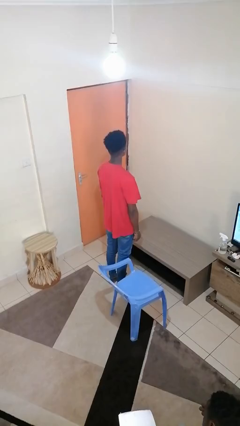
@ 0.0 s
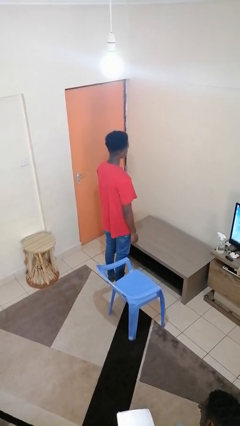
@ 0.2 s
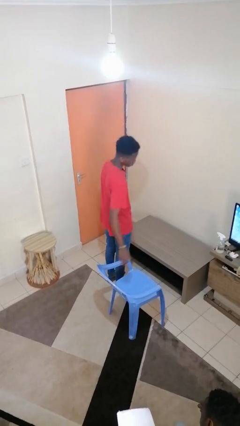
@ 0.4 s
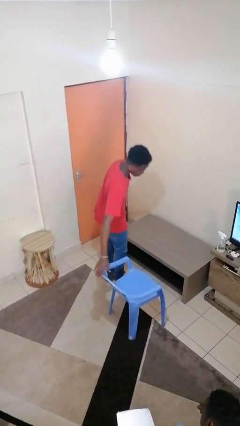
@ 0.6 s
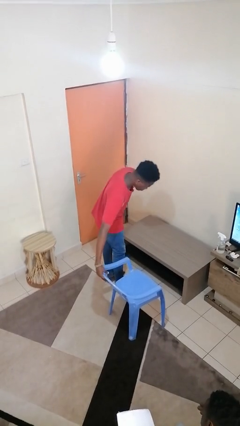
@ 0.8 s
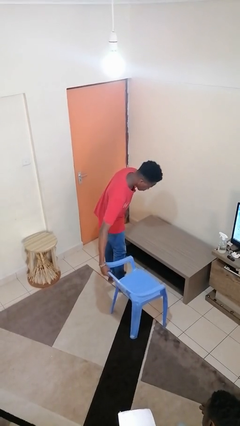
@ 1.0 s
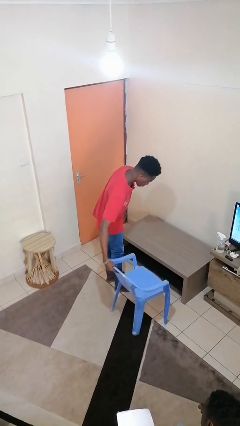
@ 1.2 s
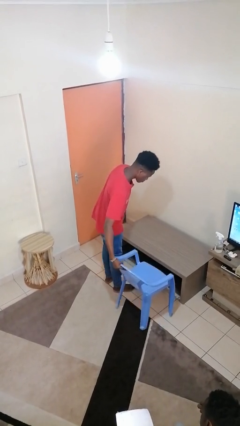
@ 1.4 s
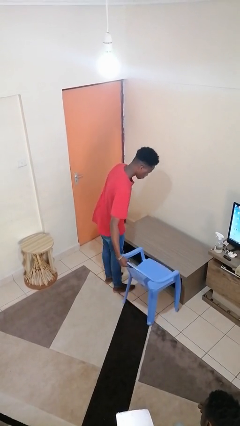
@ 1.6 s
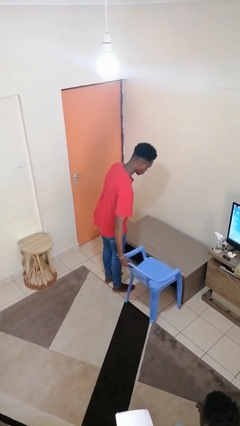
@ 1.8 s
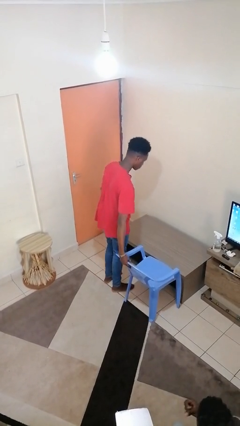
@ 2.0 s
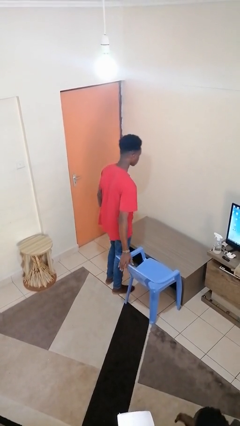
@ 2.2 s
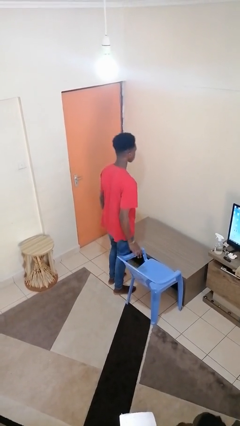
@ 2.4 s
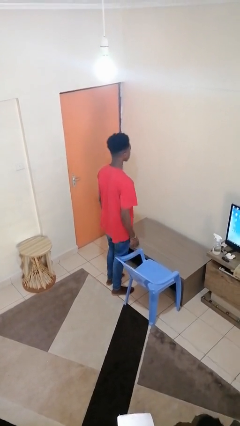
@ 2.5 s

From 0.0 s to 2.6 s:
person pushes in chair

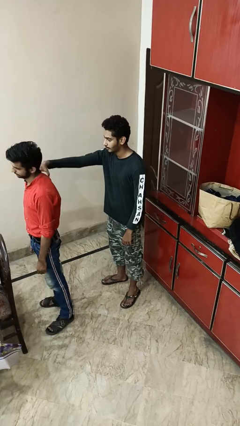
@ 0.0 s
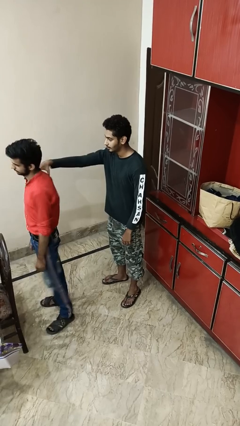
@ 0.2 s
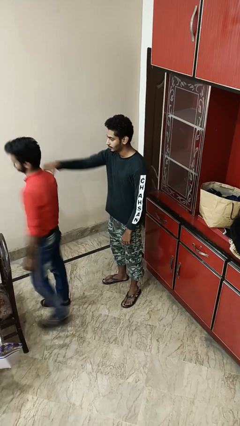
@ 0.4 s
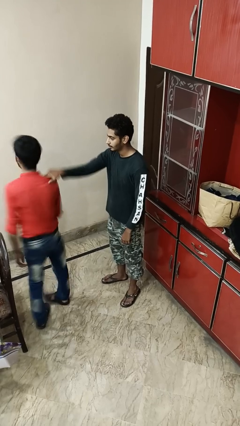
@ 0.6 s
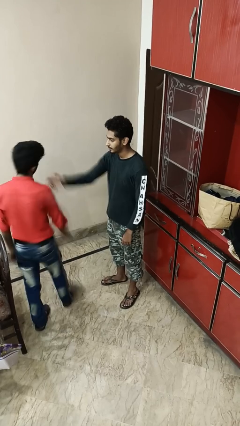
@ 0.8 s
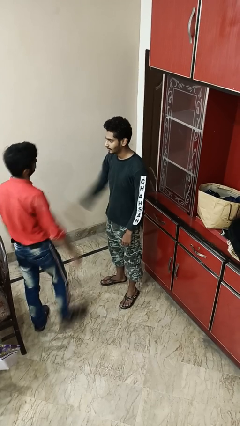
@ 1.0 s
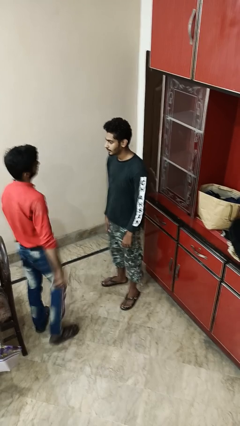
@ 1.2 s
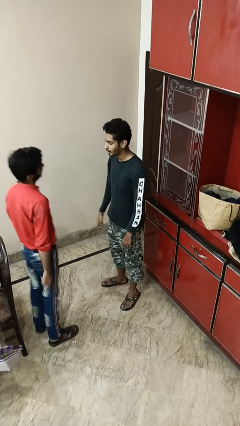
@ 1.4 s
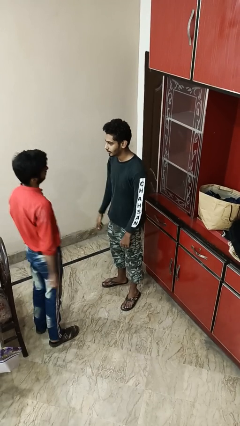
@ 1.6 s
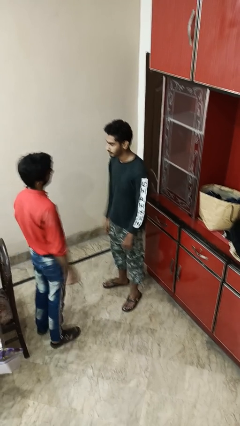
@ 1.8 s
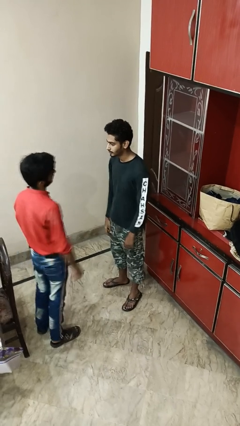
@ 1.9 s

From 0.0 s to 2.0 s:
person spins person around

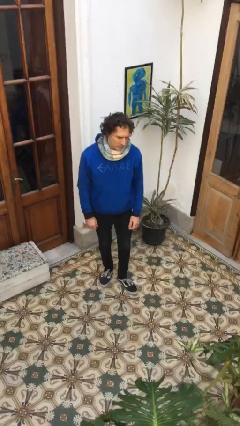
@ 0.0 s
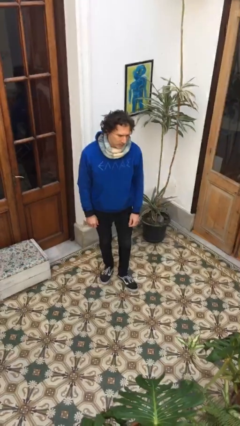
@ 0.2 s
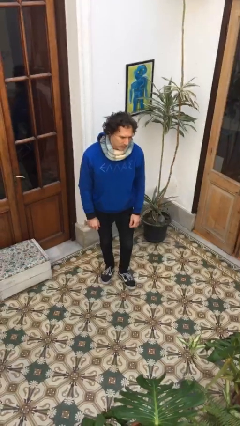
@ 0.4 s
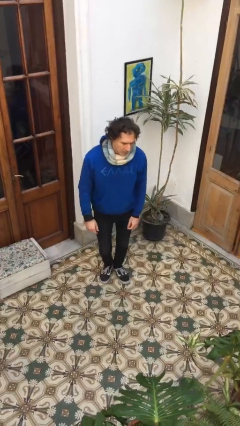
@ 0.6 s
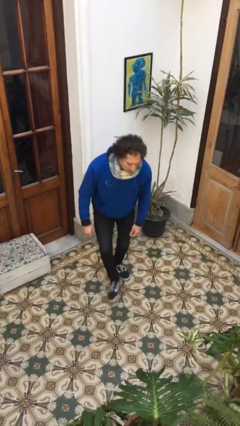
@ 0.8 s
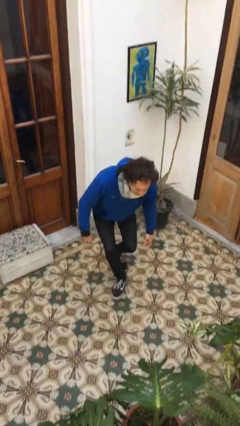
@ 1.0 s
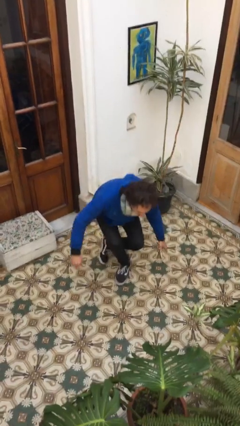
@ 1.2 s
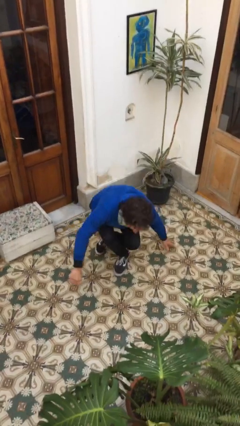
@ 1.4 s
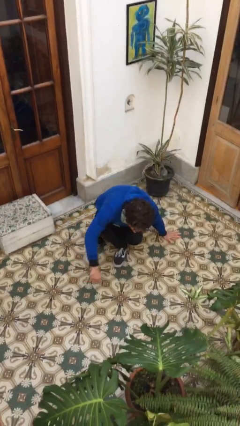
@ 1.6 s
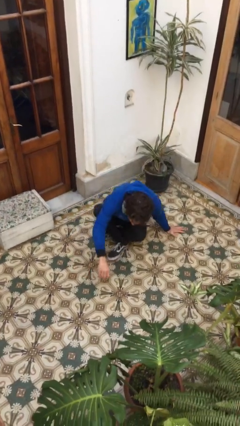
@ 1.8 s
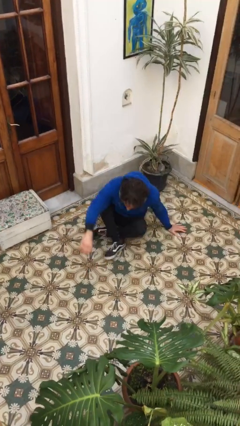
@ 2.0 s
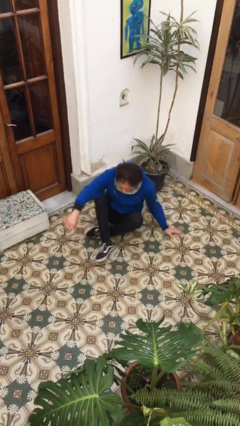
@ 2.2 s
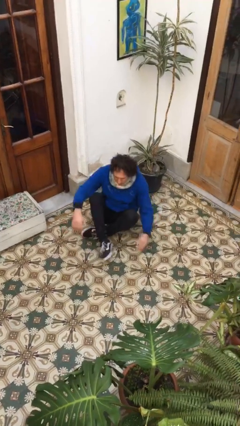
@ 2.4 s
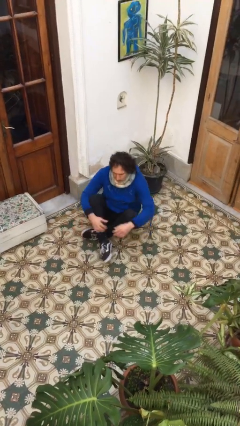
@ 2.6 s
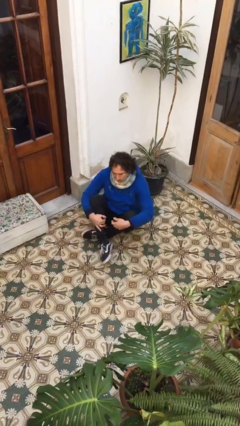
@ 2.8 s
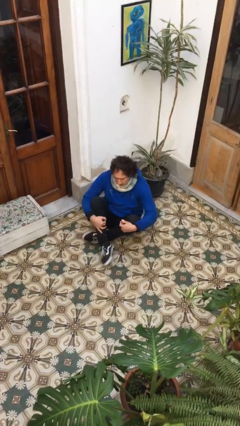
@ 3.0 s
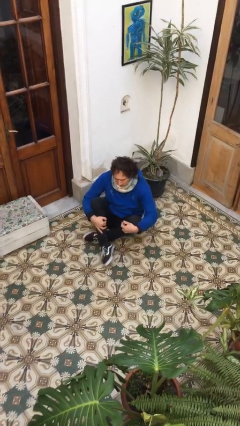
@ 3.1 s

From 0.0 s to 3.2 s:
person sits crisscross

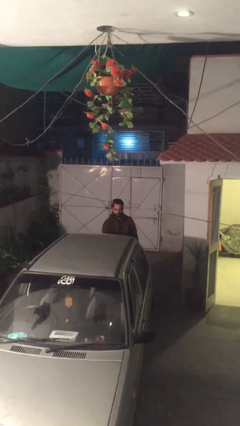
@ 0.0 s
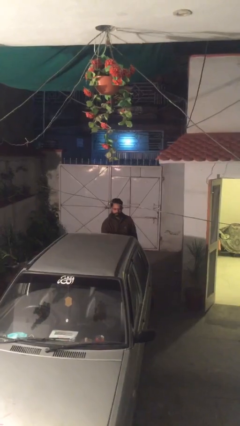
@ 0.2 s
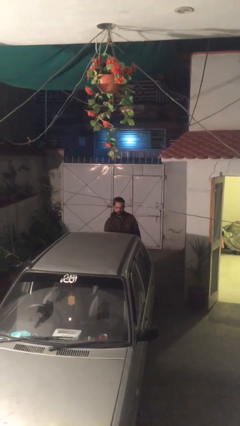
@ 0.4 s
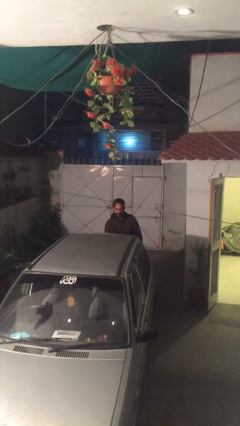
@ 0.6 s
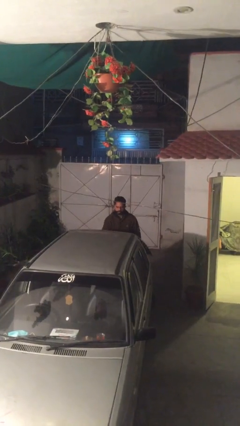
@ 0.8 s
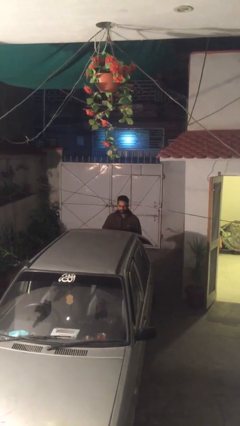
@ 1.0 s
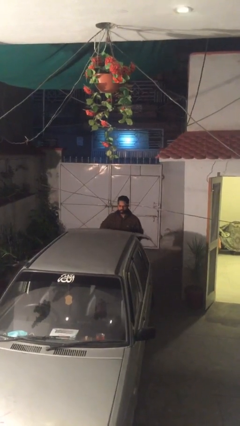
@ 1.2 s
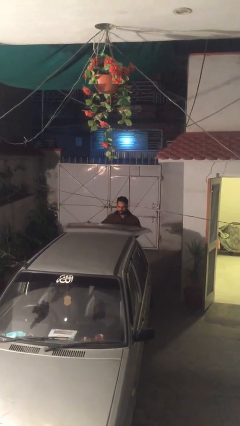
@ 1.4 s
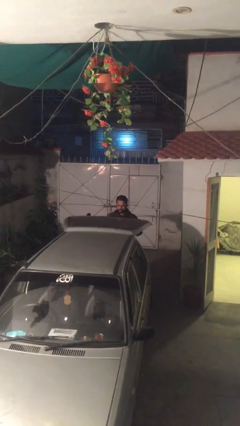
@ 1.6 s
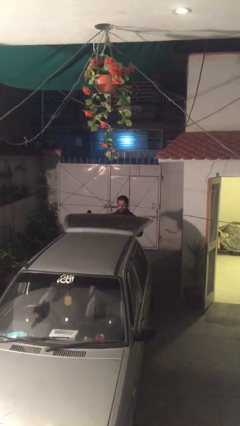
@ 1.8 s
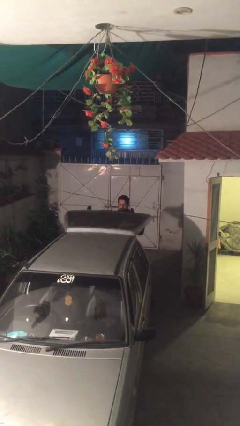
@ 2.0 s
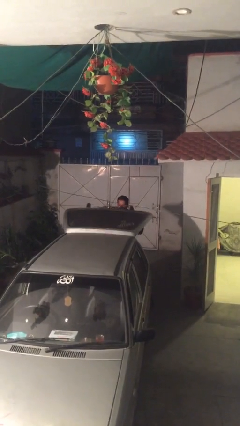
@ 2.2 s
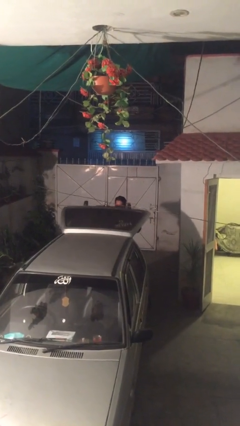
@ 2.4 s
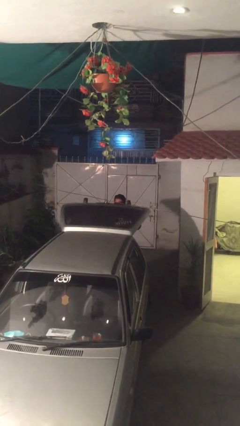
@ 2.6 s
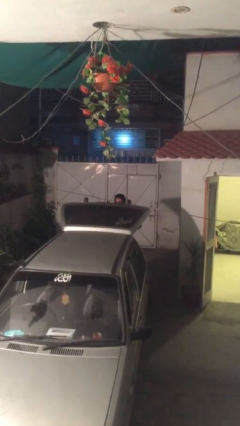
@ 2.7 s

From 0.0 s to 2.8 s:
person opens car trunk

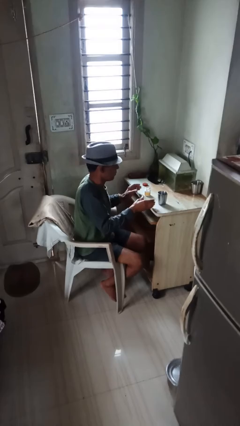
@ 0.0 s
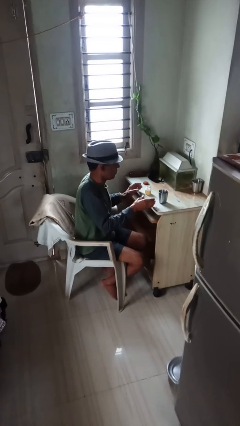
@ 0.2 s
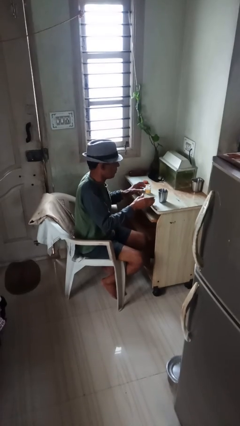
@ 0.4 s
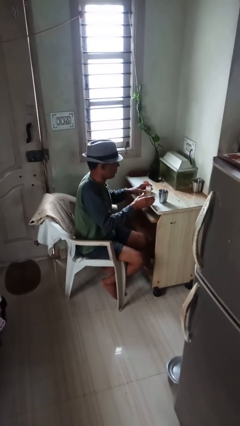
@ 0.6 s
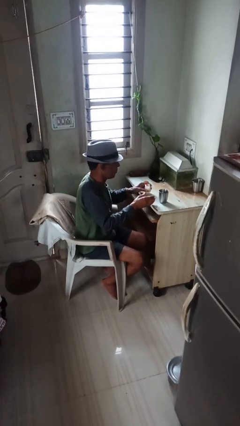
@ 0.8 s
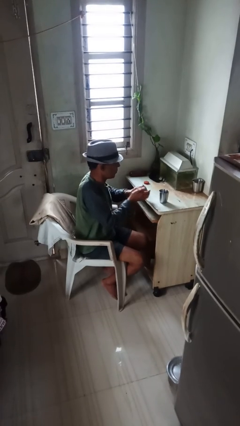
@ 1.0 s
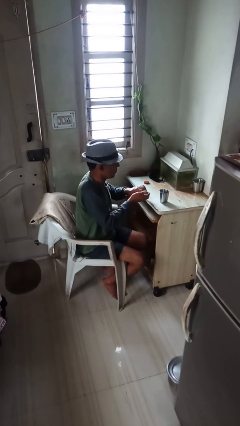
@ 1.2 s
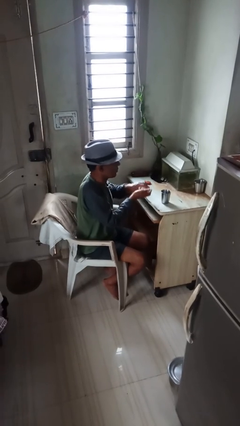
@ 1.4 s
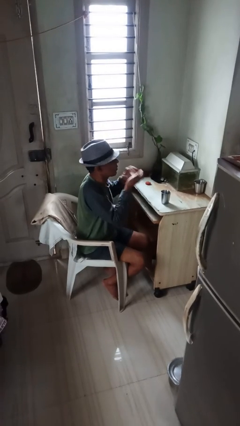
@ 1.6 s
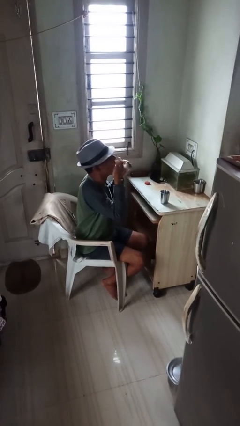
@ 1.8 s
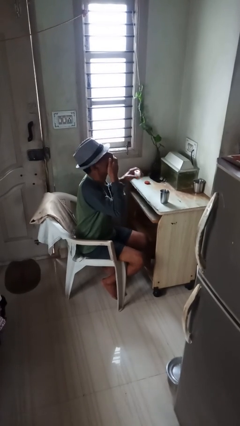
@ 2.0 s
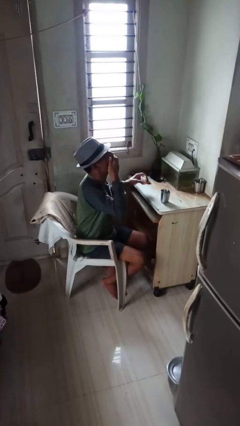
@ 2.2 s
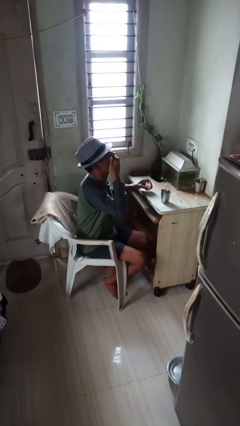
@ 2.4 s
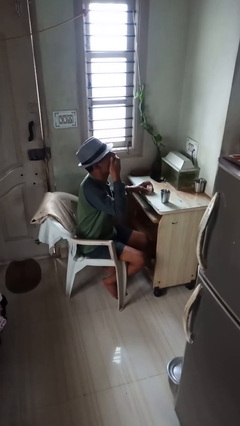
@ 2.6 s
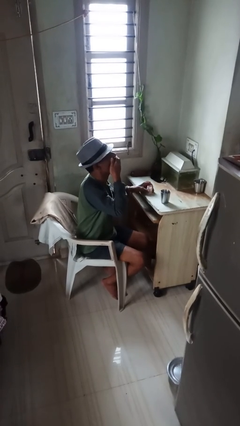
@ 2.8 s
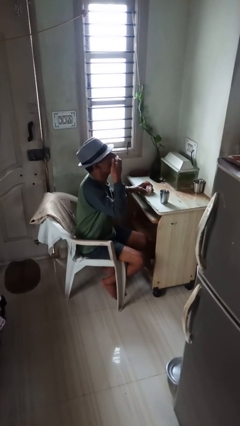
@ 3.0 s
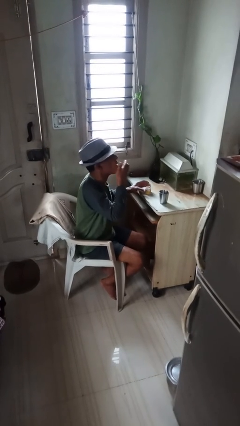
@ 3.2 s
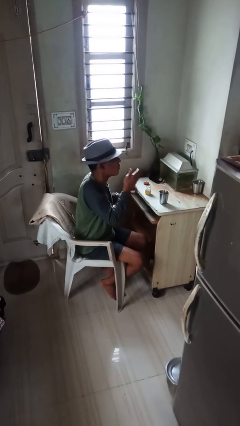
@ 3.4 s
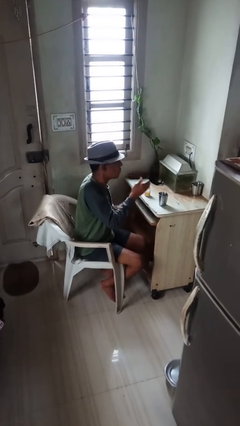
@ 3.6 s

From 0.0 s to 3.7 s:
person takes medicine pills

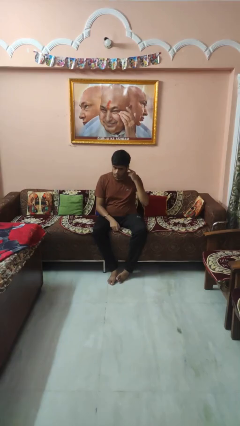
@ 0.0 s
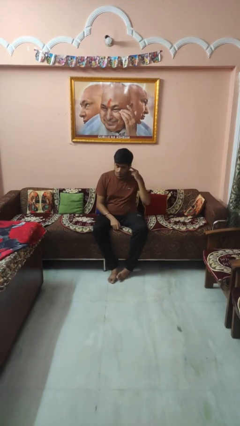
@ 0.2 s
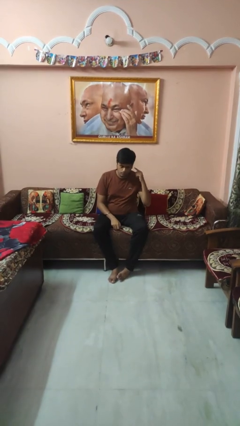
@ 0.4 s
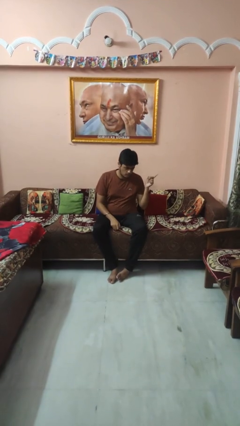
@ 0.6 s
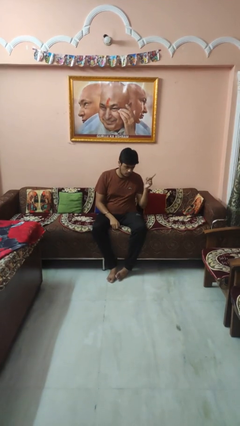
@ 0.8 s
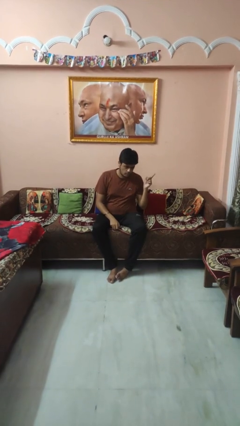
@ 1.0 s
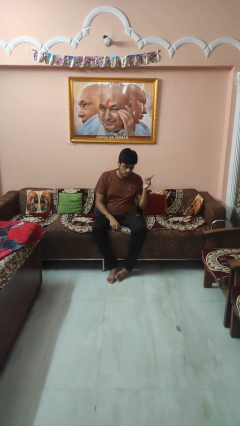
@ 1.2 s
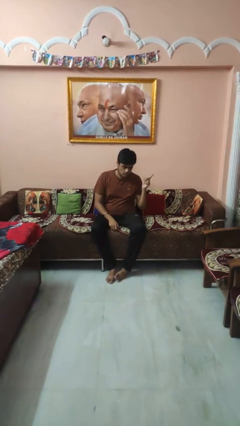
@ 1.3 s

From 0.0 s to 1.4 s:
person gestures listen closely

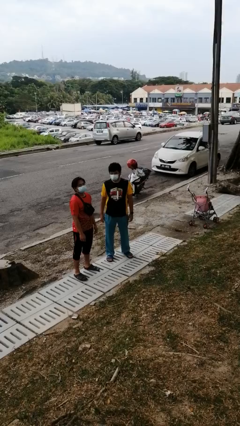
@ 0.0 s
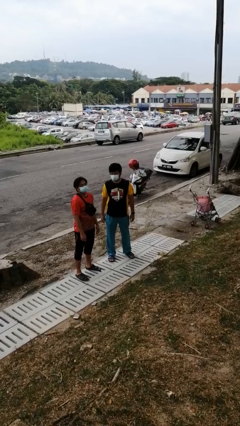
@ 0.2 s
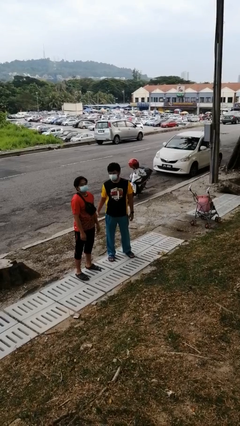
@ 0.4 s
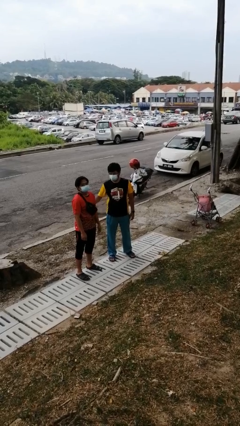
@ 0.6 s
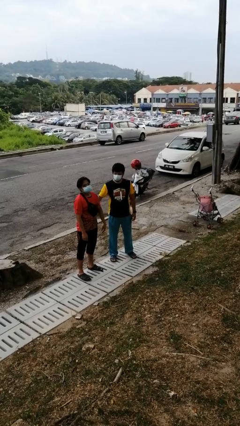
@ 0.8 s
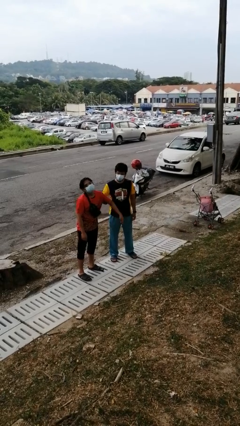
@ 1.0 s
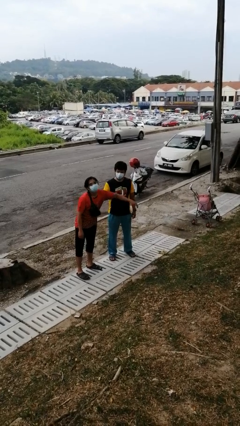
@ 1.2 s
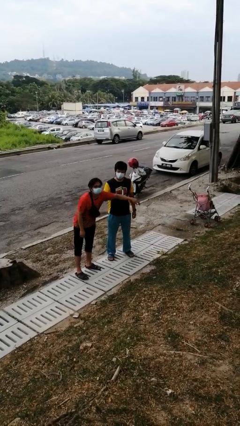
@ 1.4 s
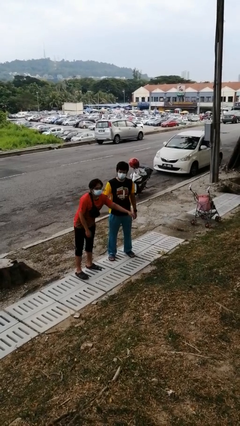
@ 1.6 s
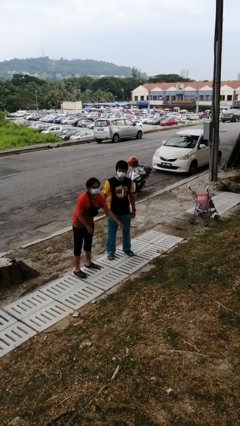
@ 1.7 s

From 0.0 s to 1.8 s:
person grabs person by bicep
